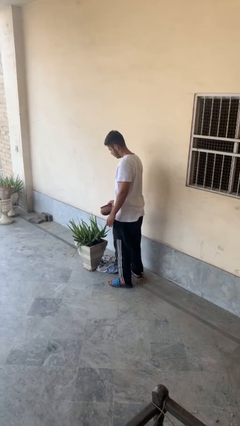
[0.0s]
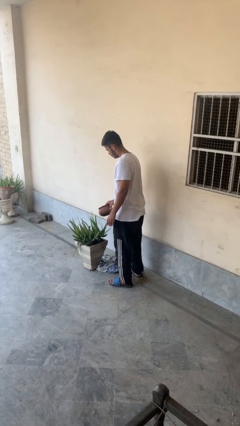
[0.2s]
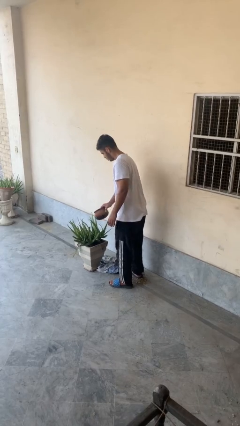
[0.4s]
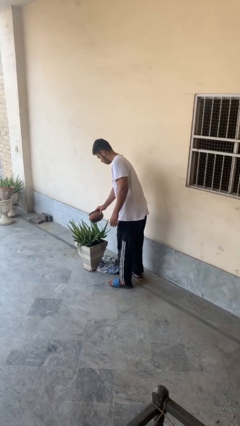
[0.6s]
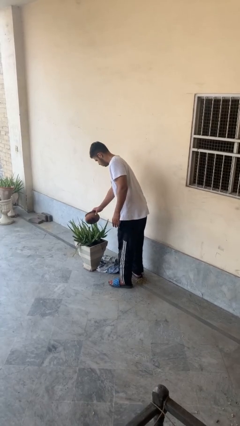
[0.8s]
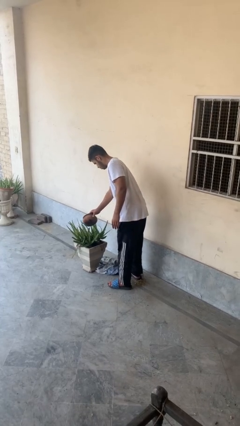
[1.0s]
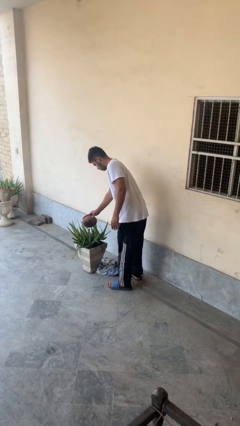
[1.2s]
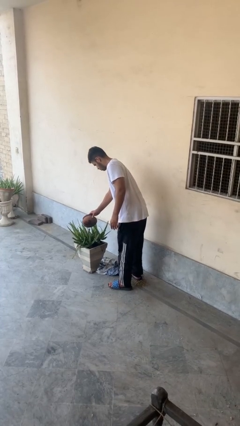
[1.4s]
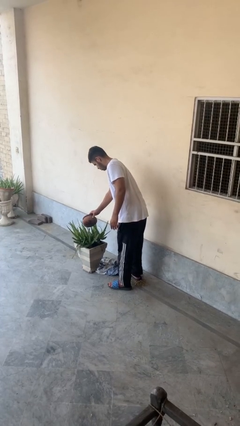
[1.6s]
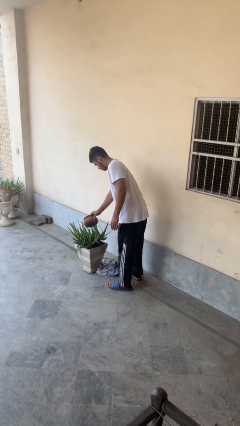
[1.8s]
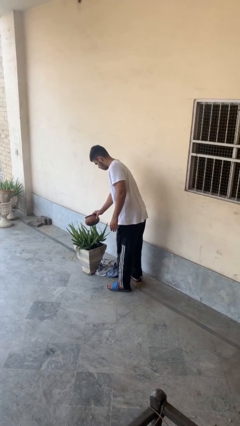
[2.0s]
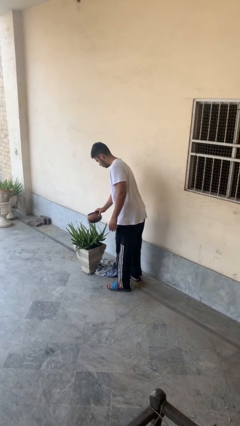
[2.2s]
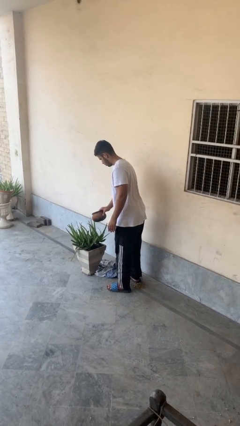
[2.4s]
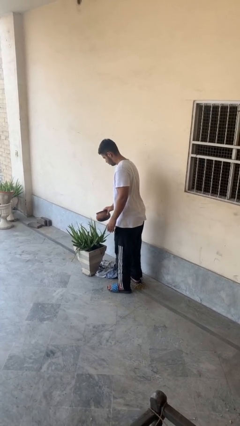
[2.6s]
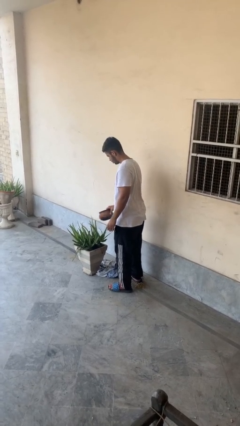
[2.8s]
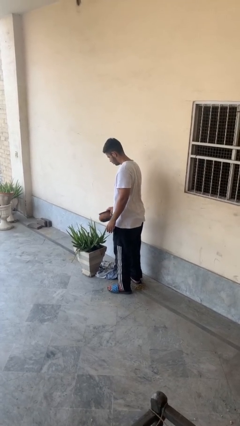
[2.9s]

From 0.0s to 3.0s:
person waters houseplant

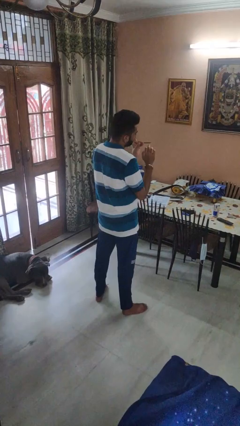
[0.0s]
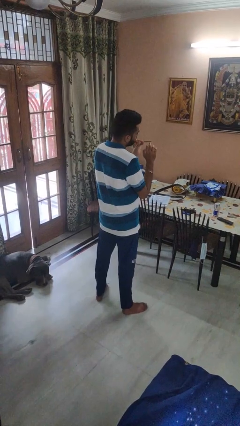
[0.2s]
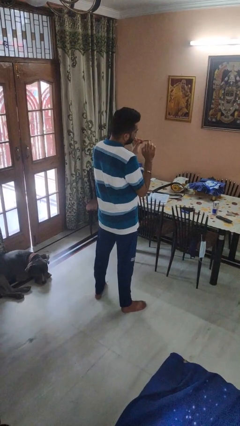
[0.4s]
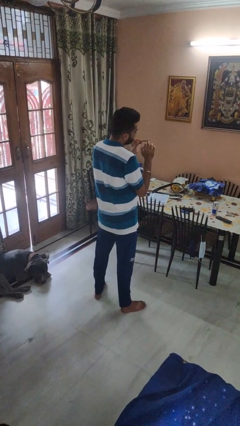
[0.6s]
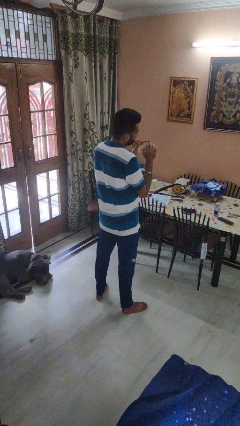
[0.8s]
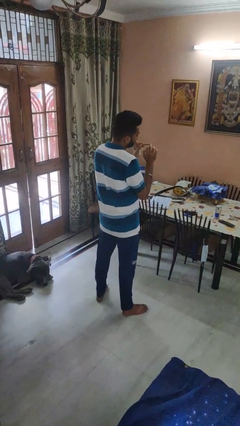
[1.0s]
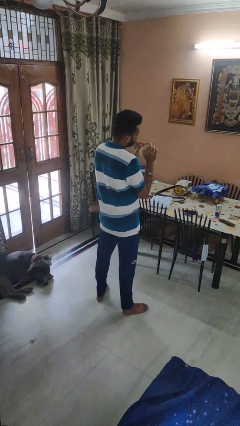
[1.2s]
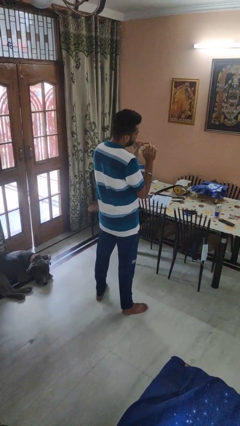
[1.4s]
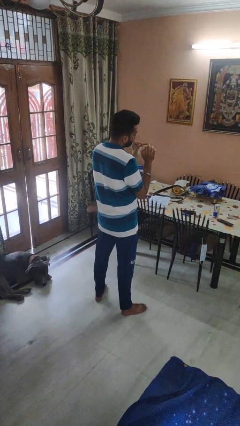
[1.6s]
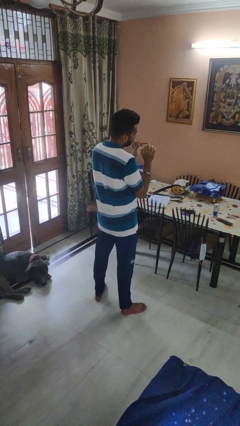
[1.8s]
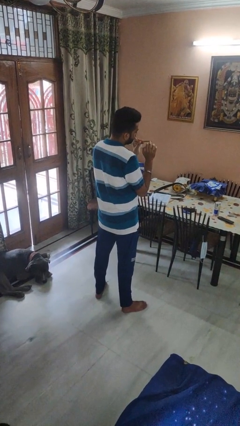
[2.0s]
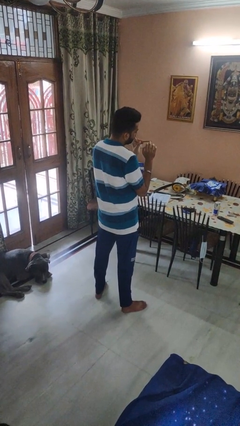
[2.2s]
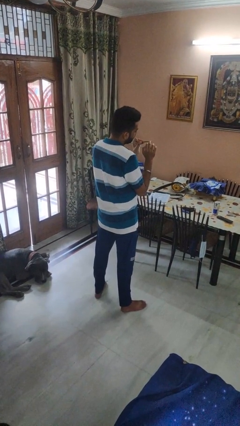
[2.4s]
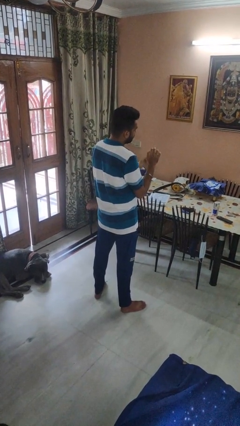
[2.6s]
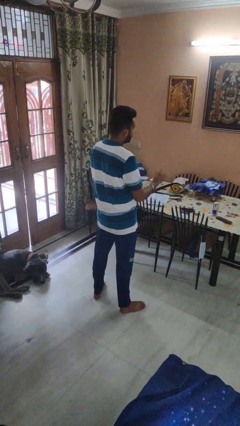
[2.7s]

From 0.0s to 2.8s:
person files fingernails

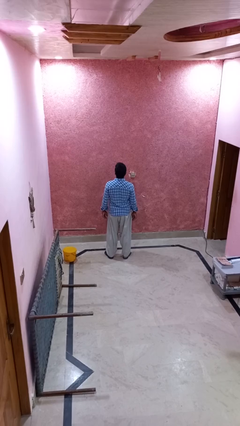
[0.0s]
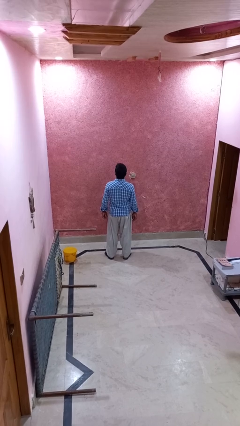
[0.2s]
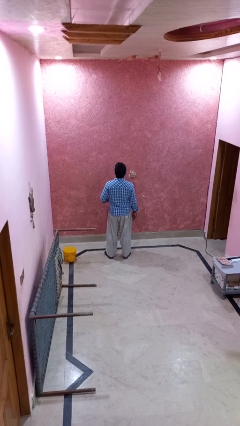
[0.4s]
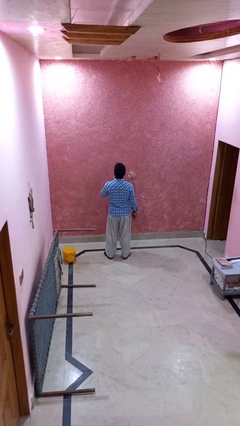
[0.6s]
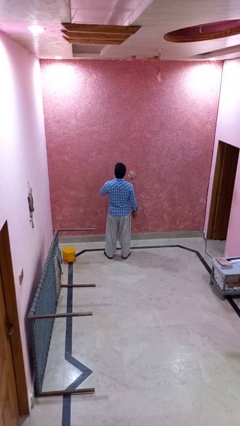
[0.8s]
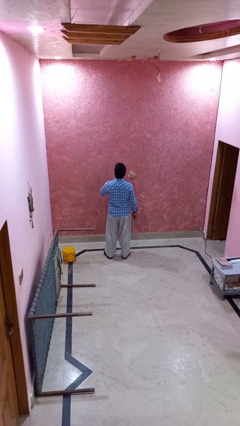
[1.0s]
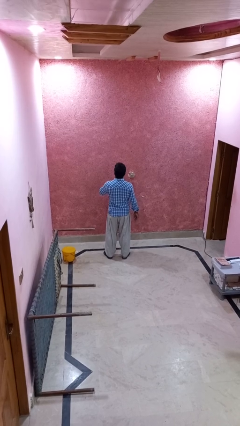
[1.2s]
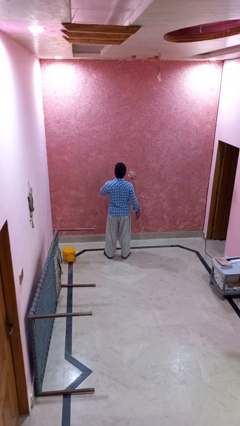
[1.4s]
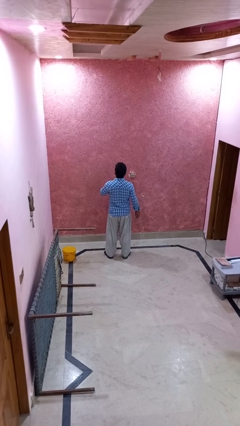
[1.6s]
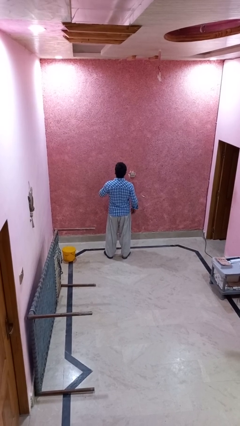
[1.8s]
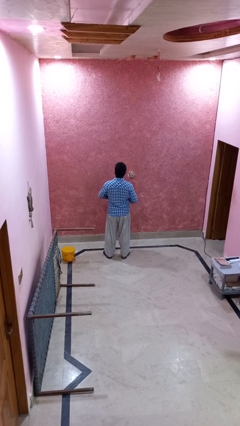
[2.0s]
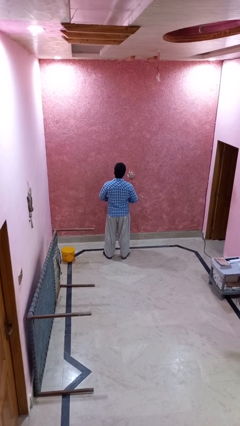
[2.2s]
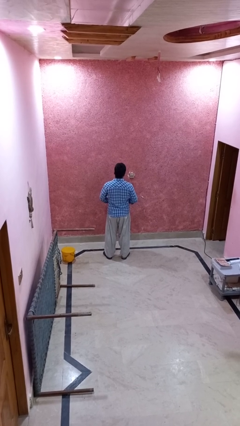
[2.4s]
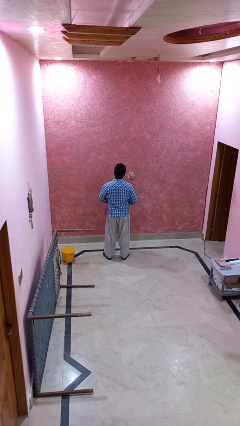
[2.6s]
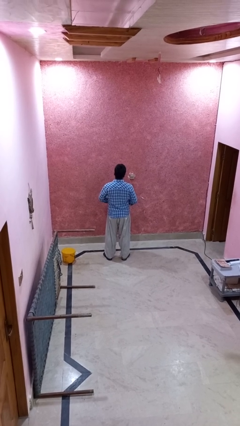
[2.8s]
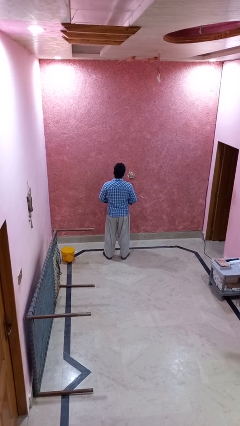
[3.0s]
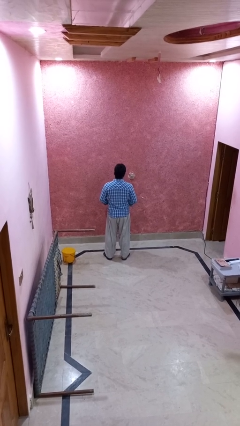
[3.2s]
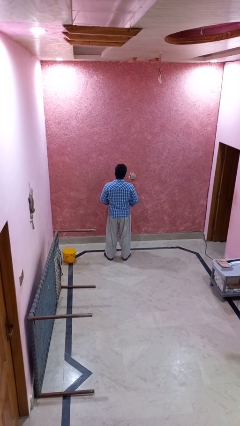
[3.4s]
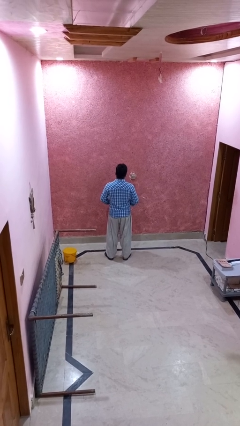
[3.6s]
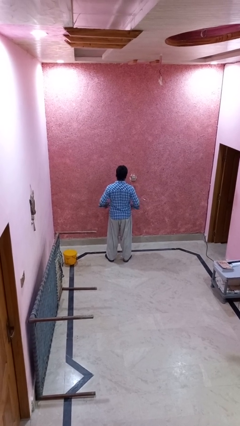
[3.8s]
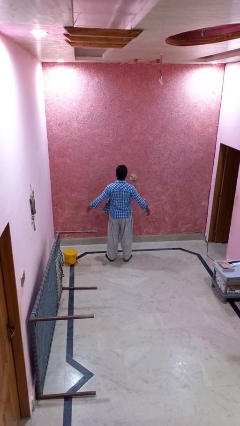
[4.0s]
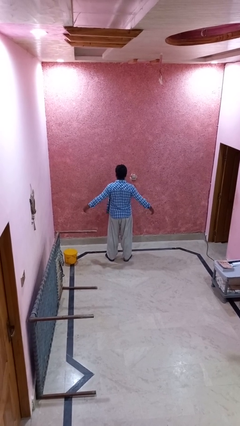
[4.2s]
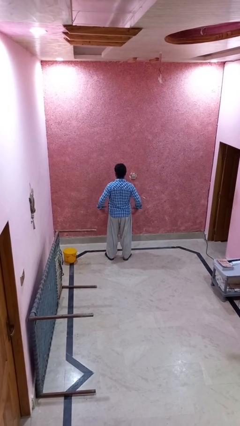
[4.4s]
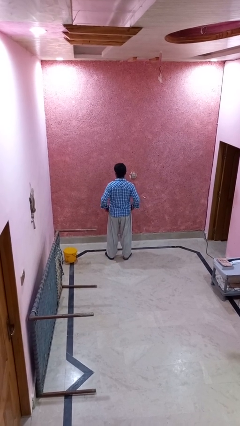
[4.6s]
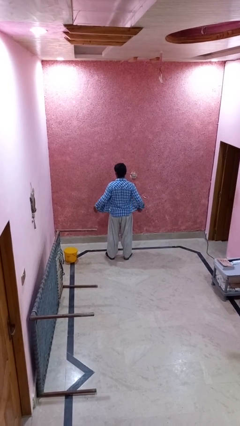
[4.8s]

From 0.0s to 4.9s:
person unbuttons shirt

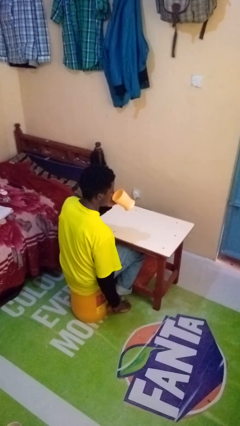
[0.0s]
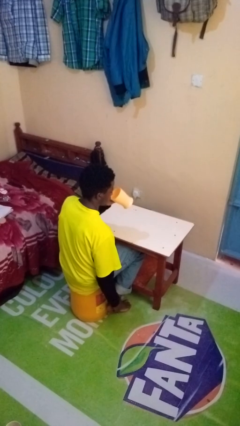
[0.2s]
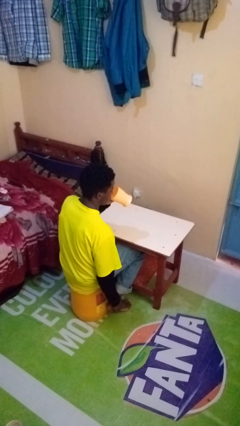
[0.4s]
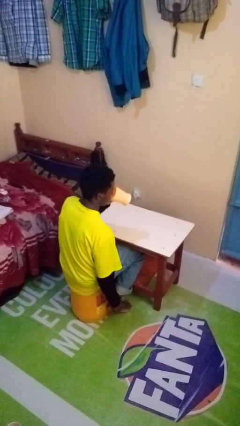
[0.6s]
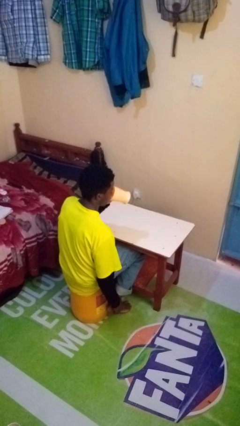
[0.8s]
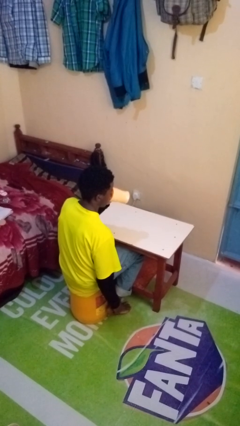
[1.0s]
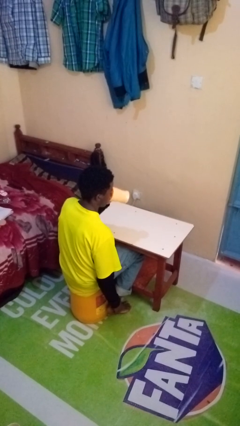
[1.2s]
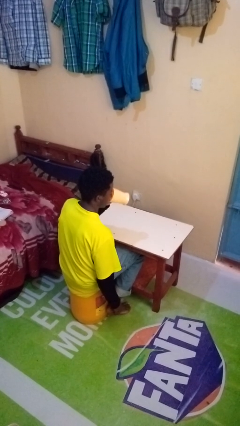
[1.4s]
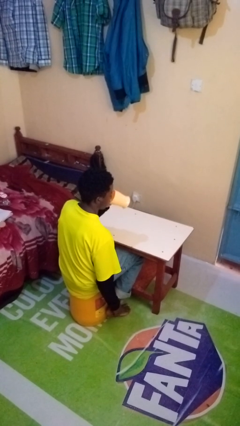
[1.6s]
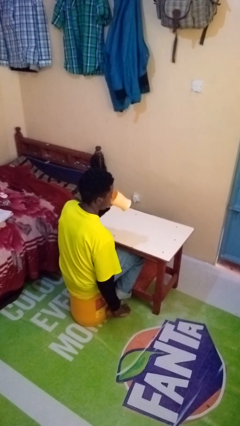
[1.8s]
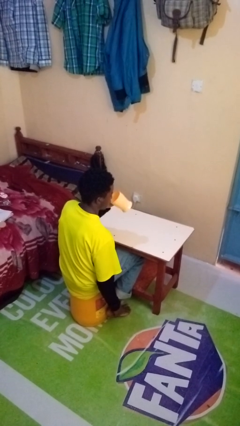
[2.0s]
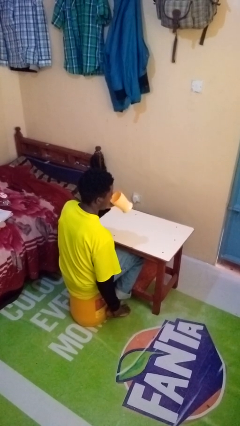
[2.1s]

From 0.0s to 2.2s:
person drinks from mug

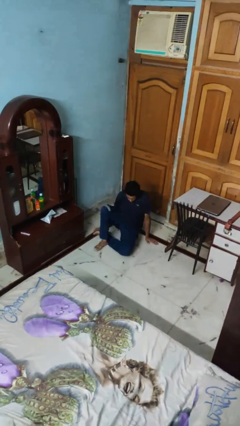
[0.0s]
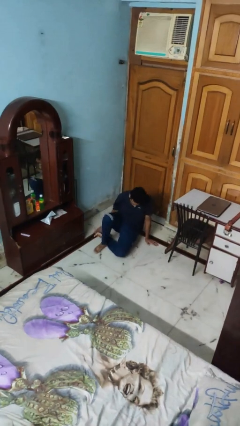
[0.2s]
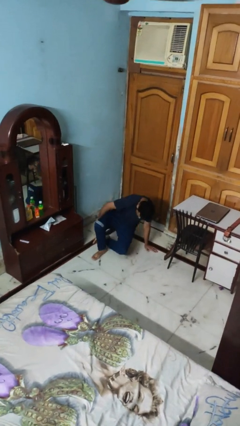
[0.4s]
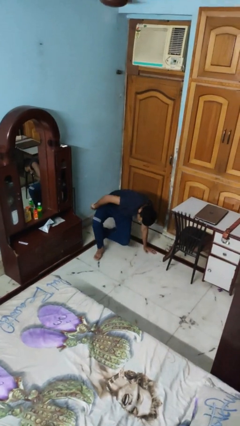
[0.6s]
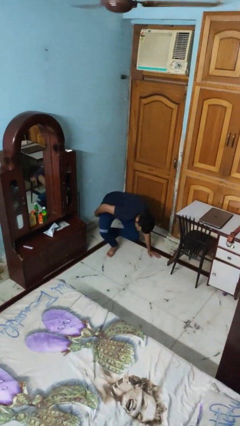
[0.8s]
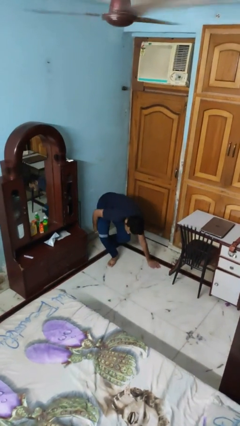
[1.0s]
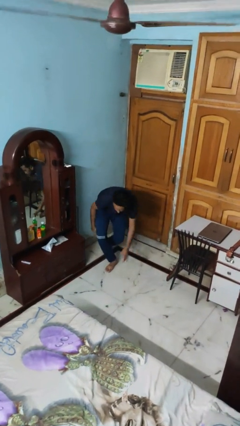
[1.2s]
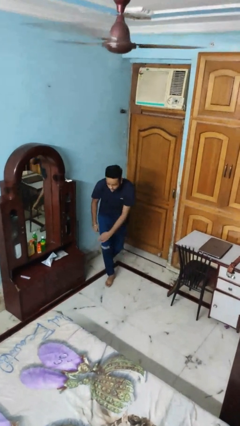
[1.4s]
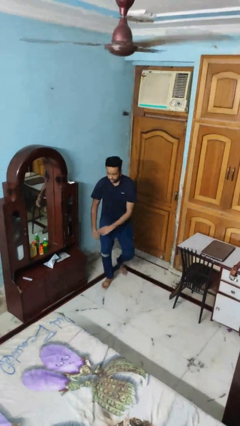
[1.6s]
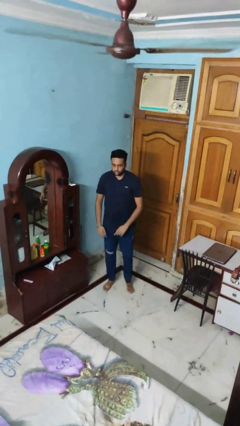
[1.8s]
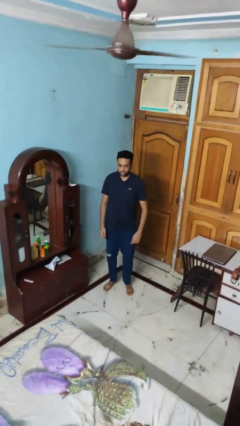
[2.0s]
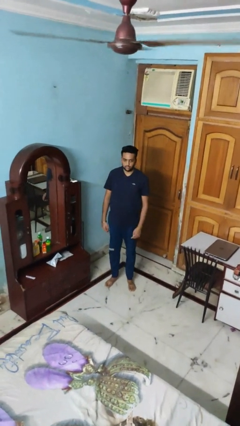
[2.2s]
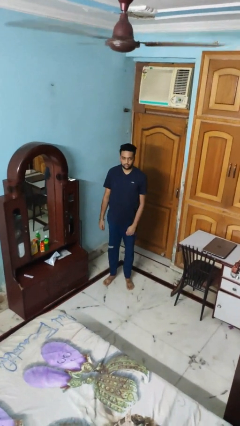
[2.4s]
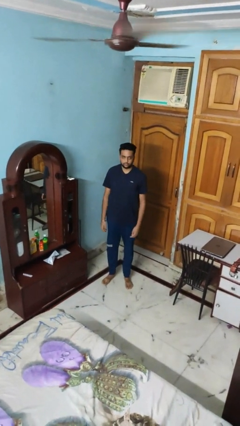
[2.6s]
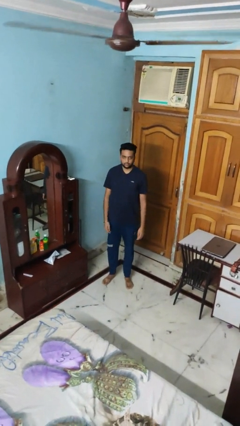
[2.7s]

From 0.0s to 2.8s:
person stands up from floor

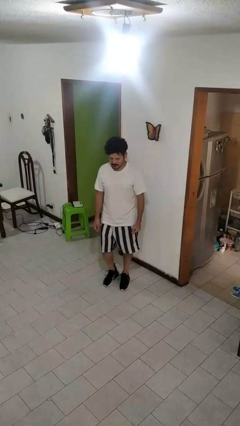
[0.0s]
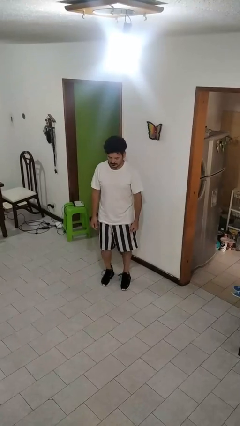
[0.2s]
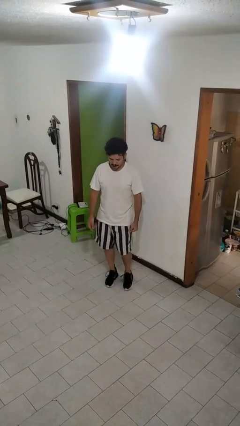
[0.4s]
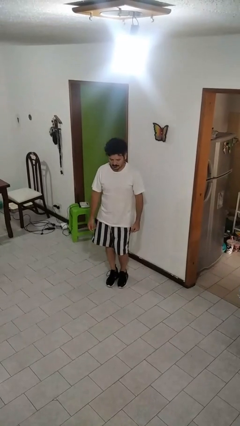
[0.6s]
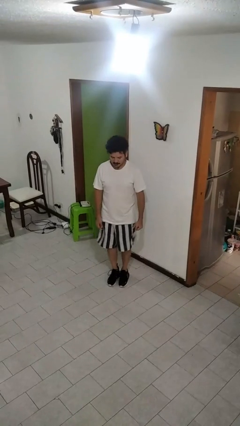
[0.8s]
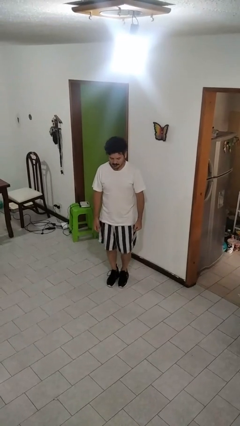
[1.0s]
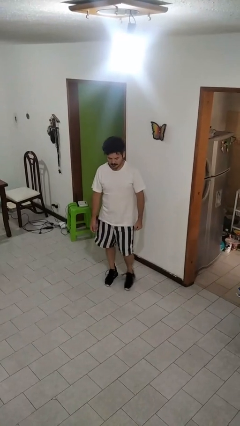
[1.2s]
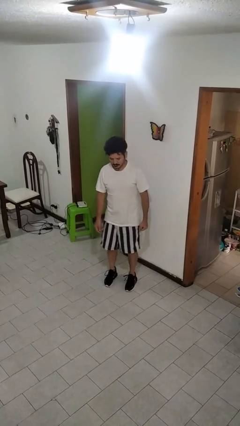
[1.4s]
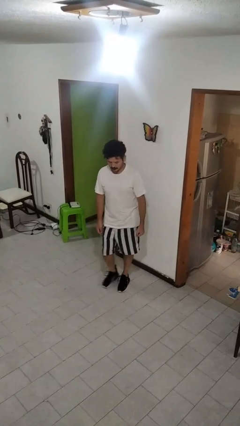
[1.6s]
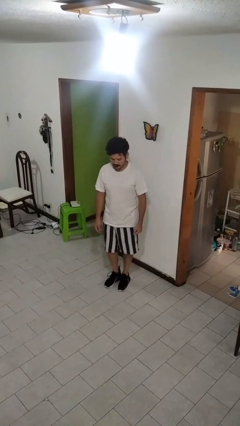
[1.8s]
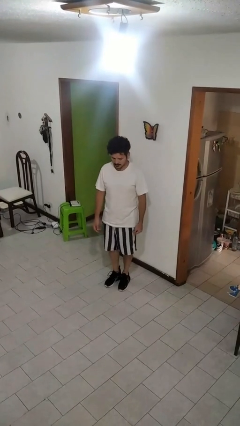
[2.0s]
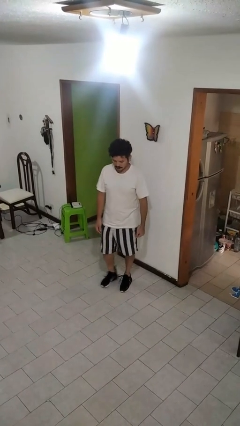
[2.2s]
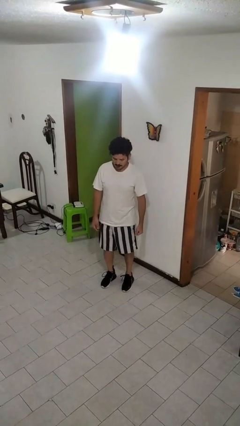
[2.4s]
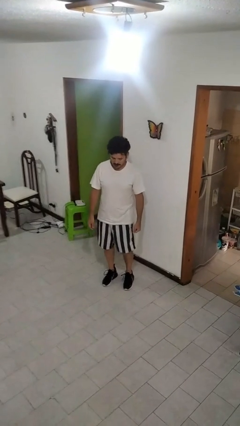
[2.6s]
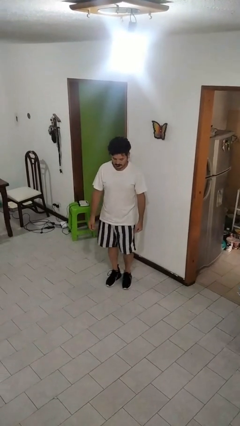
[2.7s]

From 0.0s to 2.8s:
person dances in place
